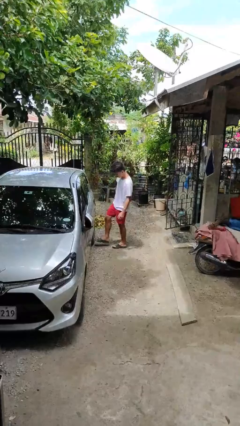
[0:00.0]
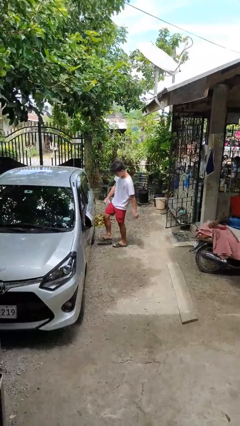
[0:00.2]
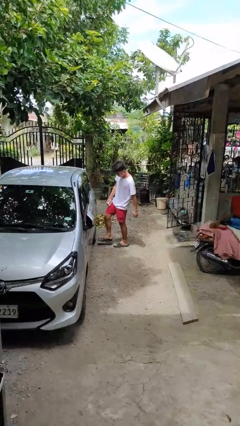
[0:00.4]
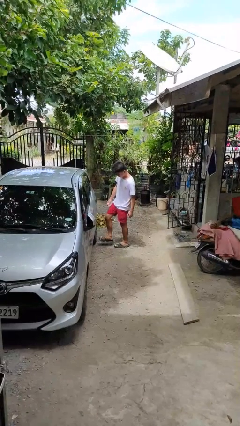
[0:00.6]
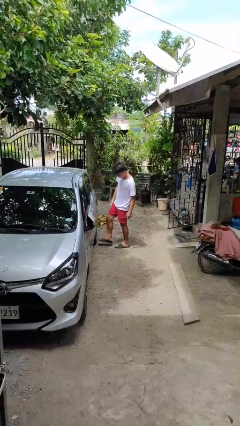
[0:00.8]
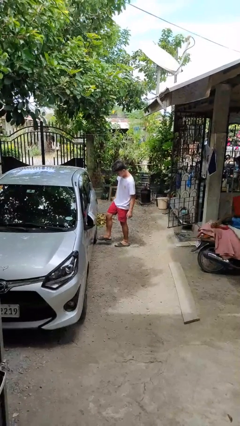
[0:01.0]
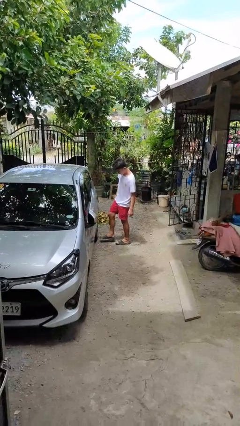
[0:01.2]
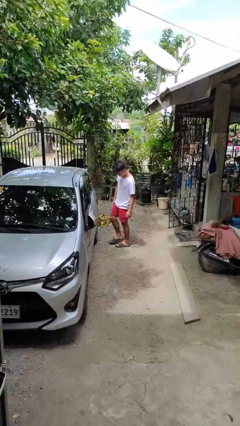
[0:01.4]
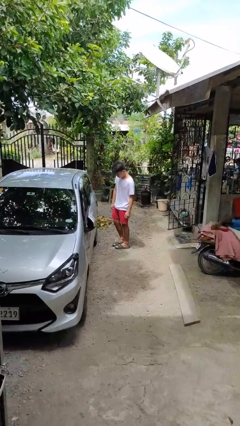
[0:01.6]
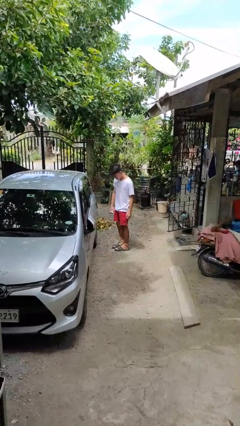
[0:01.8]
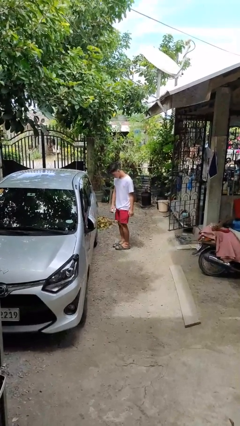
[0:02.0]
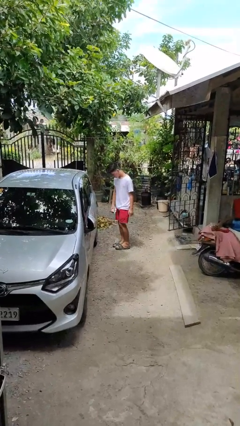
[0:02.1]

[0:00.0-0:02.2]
person kicks car tires

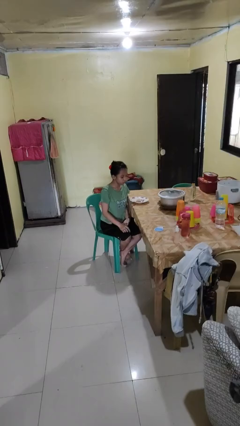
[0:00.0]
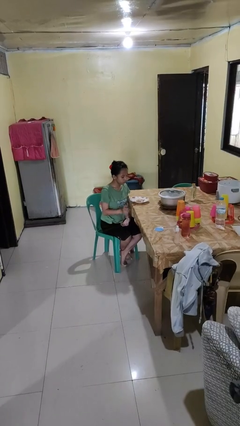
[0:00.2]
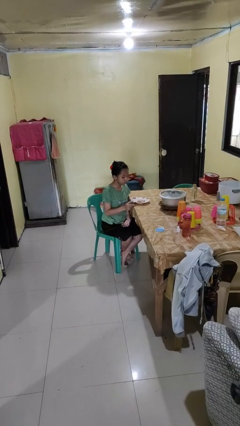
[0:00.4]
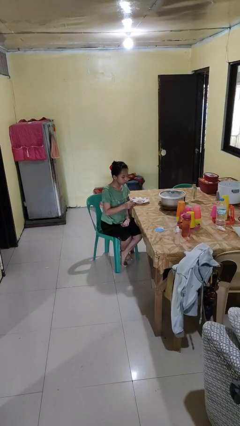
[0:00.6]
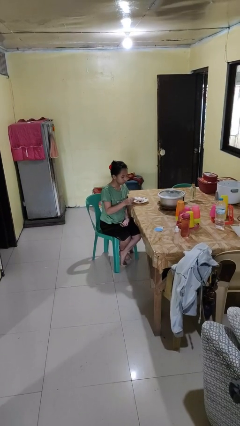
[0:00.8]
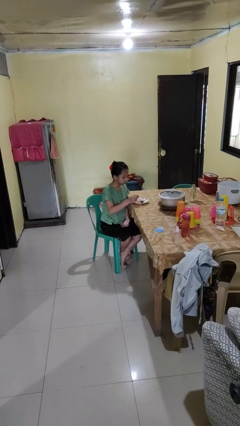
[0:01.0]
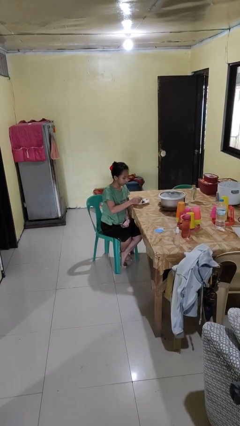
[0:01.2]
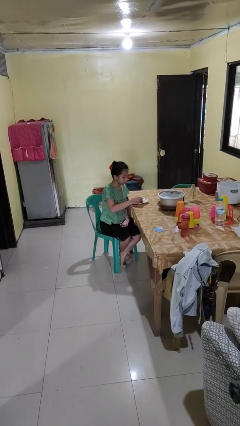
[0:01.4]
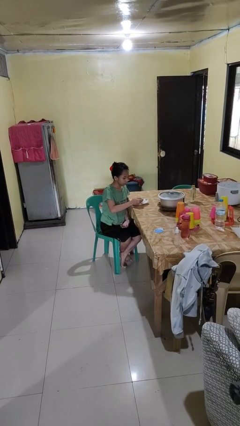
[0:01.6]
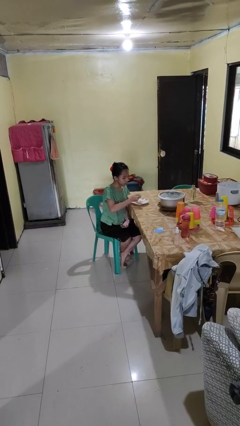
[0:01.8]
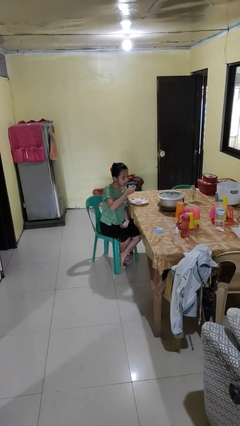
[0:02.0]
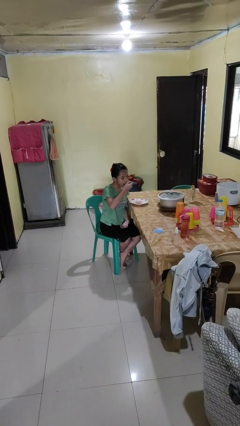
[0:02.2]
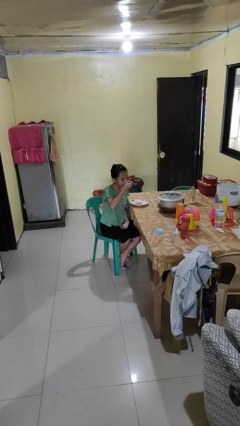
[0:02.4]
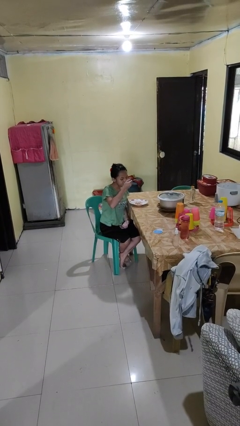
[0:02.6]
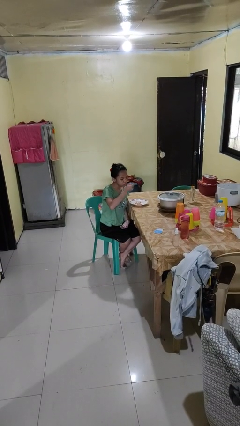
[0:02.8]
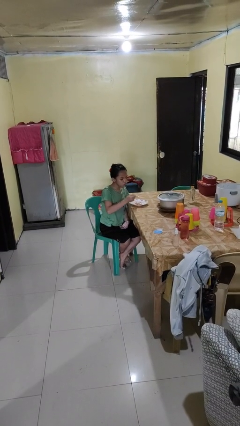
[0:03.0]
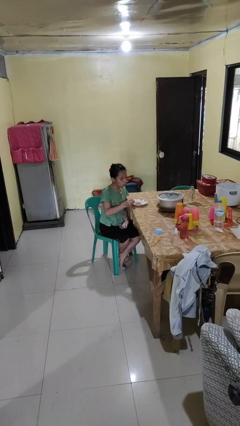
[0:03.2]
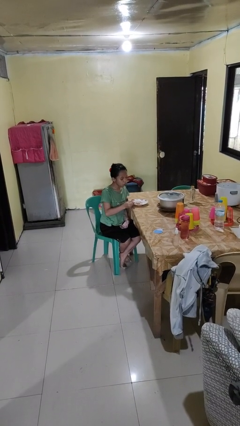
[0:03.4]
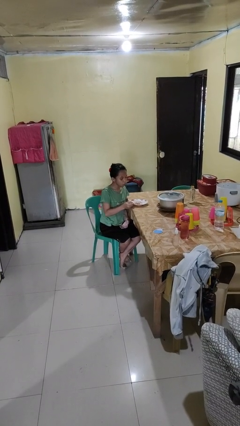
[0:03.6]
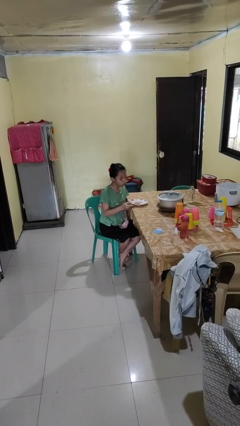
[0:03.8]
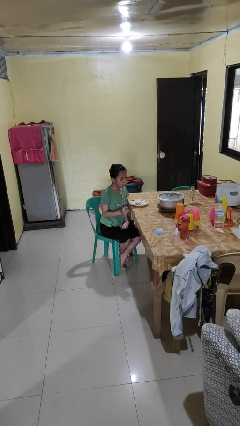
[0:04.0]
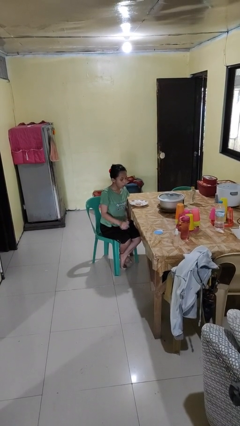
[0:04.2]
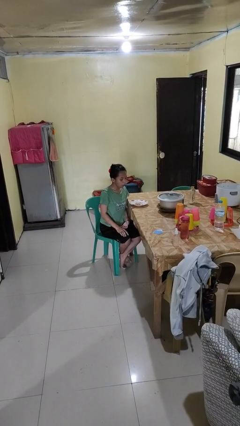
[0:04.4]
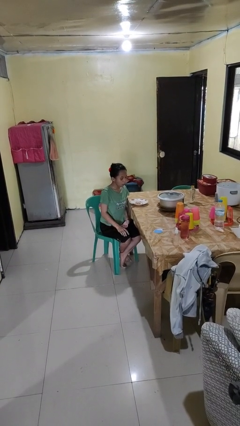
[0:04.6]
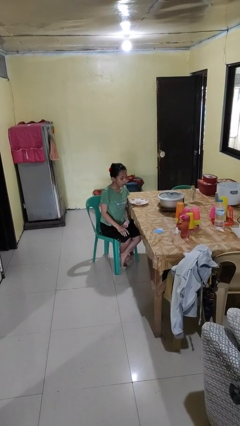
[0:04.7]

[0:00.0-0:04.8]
person eats with utensil

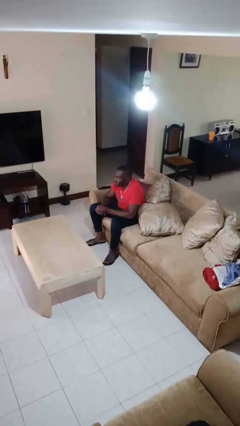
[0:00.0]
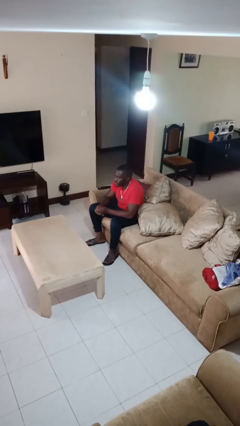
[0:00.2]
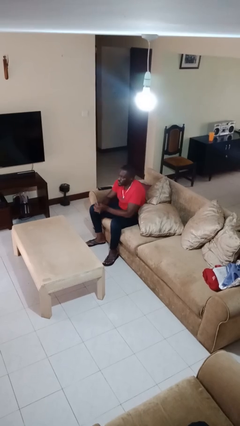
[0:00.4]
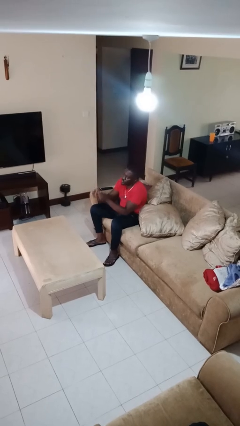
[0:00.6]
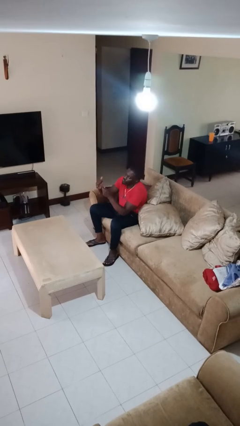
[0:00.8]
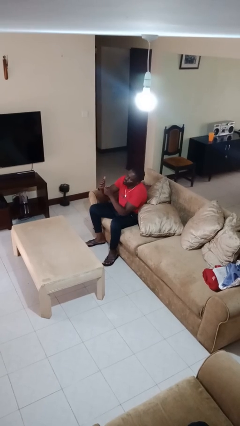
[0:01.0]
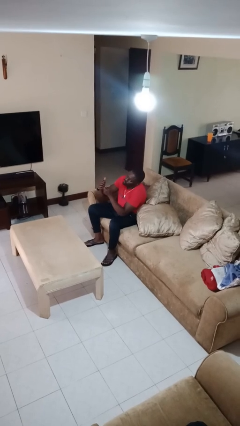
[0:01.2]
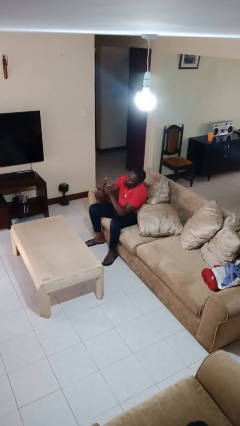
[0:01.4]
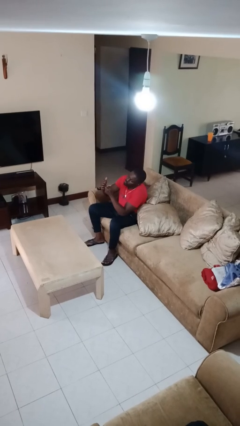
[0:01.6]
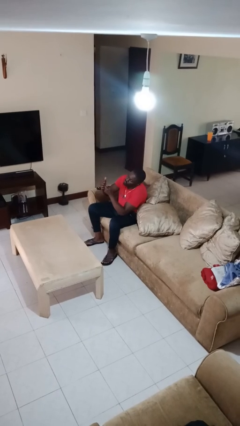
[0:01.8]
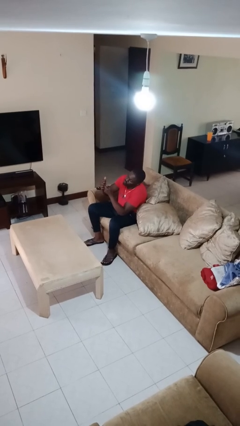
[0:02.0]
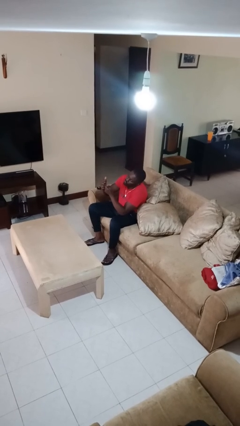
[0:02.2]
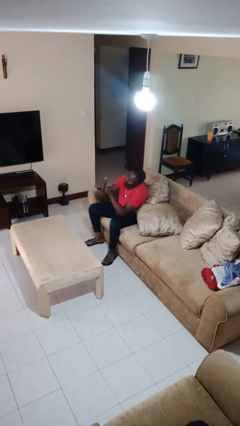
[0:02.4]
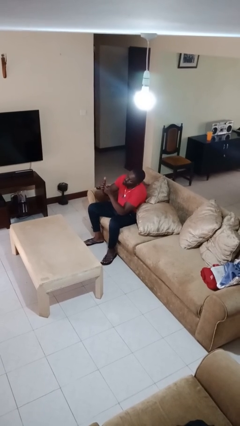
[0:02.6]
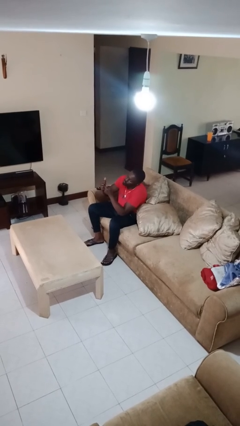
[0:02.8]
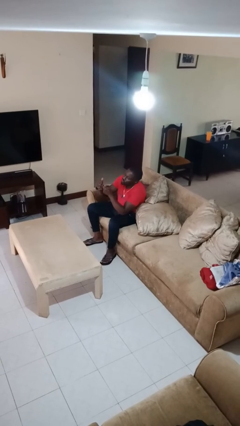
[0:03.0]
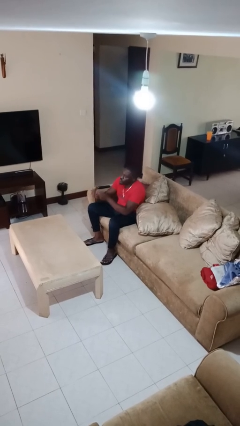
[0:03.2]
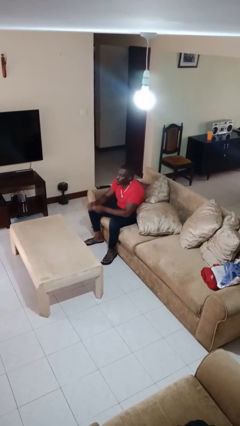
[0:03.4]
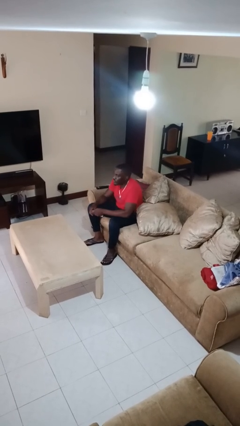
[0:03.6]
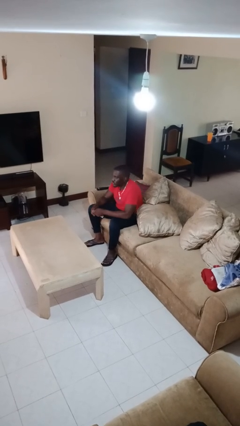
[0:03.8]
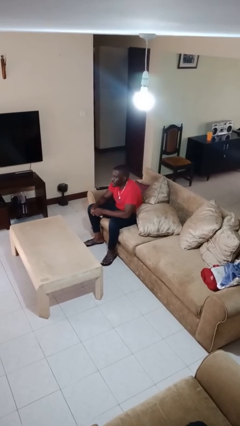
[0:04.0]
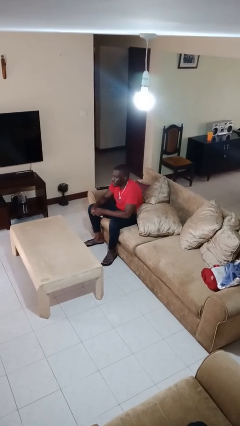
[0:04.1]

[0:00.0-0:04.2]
person clips fingernails

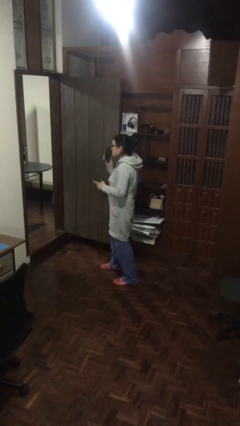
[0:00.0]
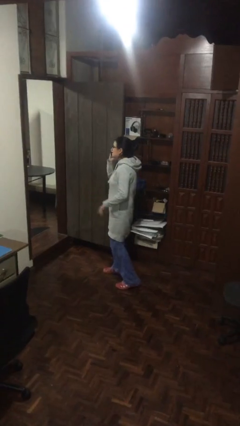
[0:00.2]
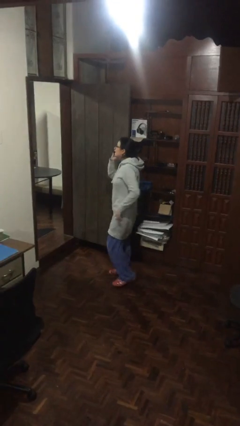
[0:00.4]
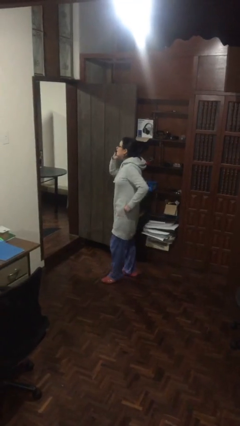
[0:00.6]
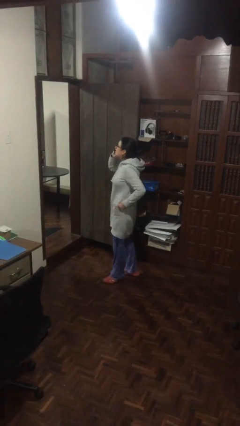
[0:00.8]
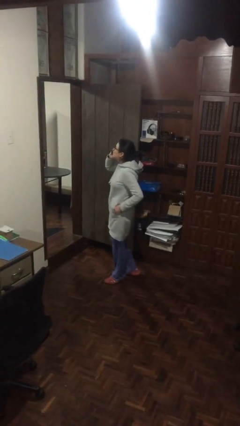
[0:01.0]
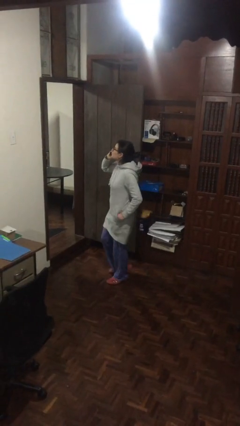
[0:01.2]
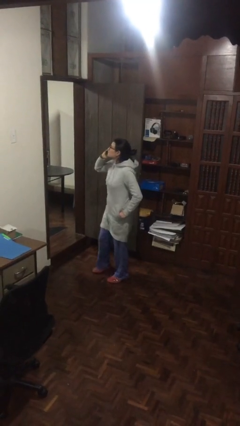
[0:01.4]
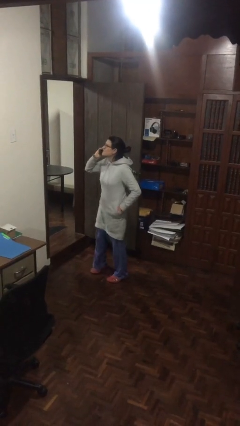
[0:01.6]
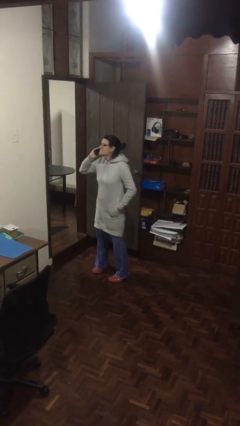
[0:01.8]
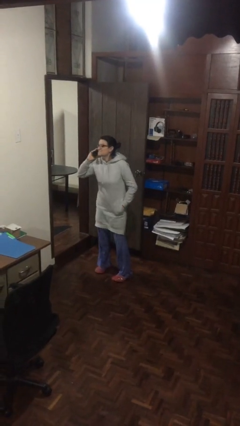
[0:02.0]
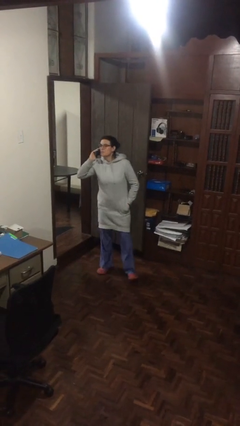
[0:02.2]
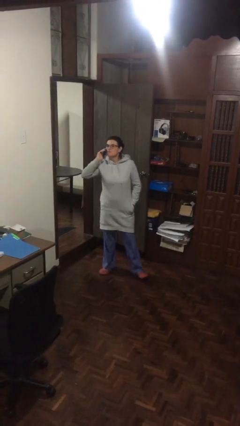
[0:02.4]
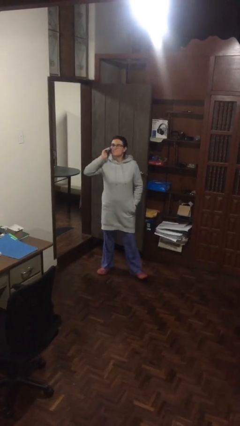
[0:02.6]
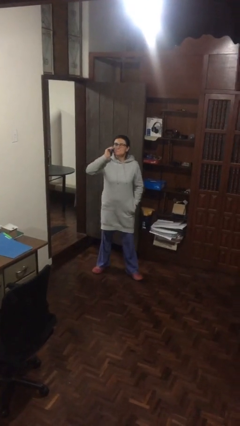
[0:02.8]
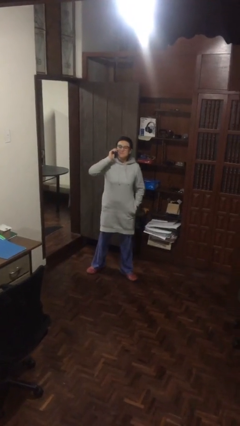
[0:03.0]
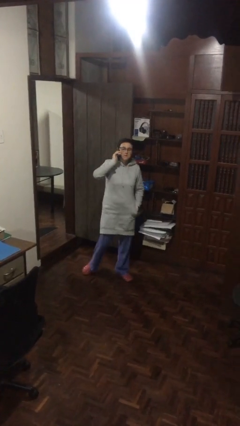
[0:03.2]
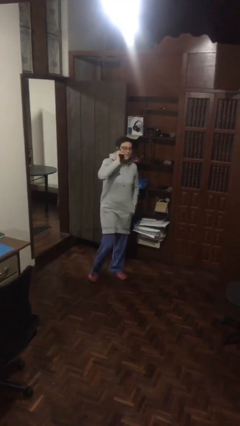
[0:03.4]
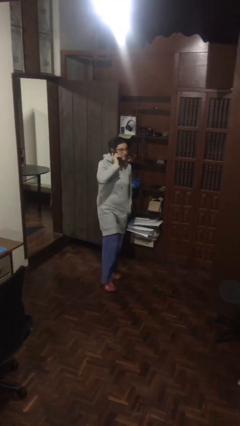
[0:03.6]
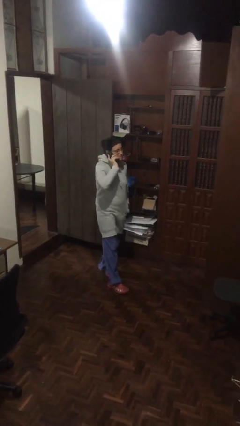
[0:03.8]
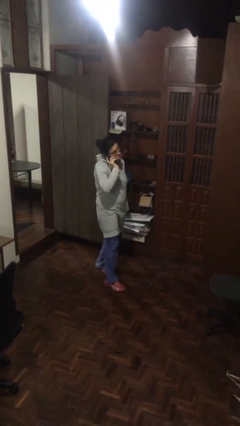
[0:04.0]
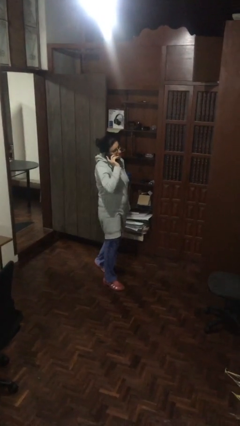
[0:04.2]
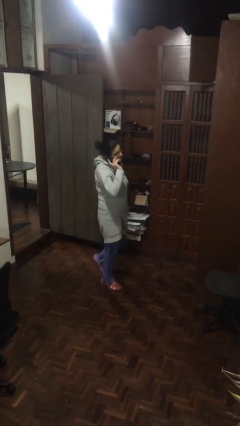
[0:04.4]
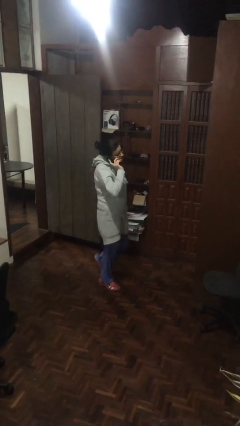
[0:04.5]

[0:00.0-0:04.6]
person talks on phone

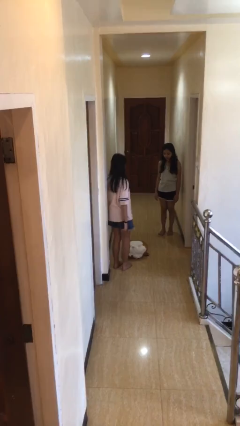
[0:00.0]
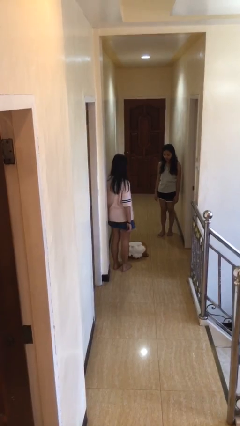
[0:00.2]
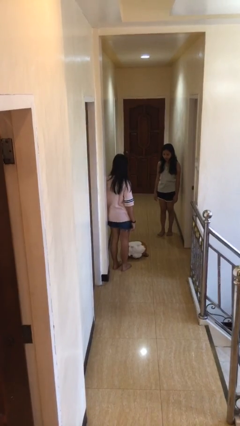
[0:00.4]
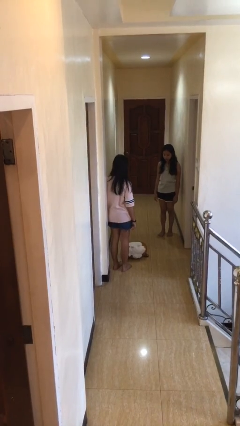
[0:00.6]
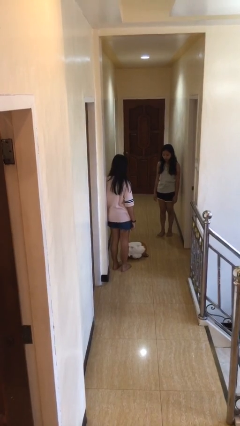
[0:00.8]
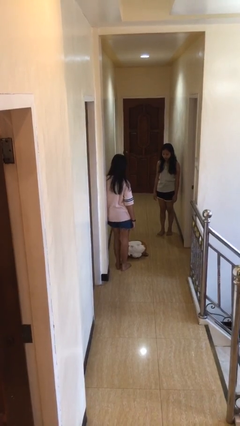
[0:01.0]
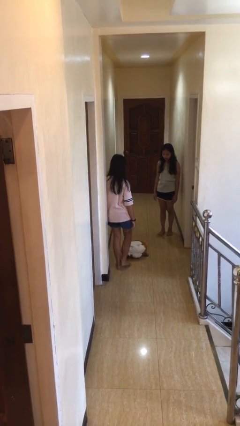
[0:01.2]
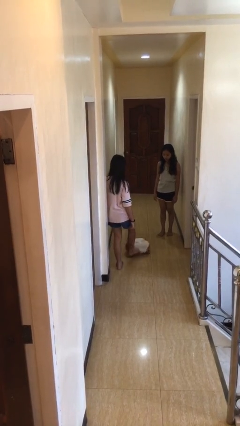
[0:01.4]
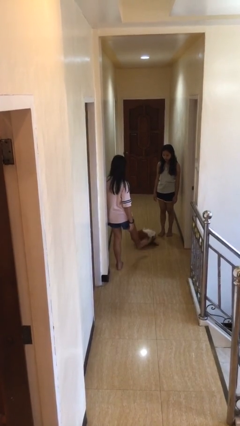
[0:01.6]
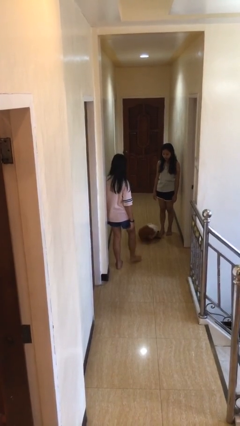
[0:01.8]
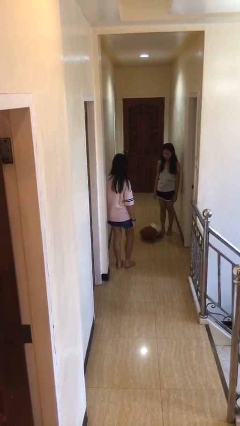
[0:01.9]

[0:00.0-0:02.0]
person kicks object to person
